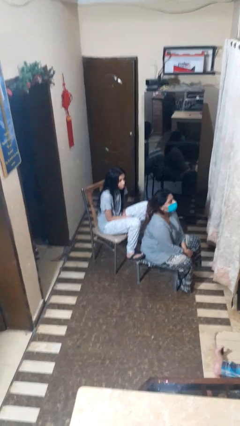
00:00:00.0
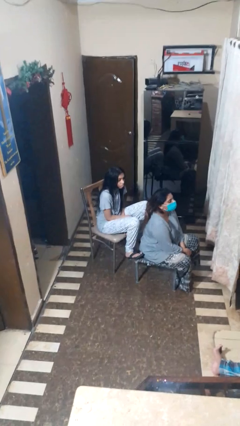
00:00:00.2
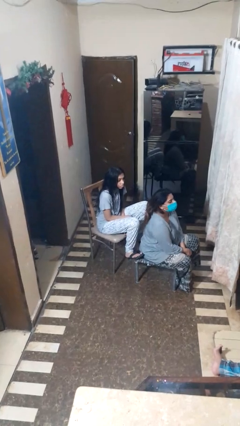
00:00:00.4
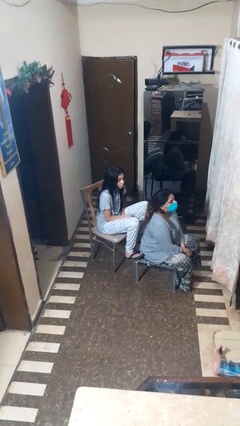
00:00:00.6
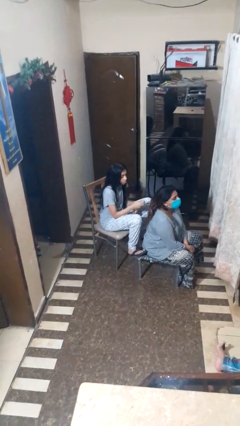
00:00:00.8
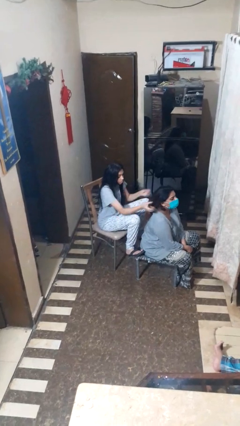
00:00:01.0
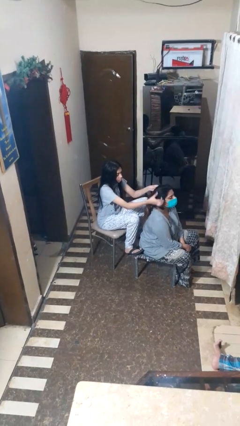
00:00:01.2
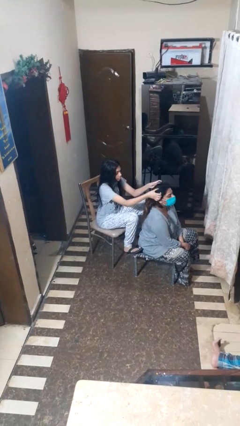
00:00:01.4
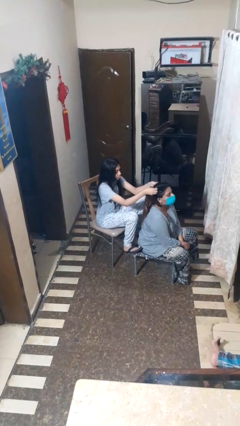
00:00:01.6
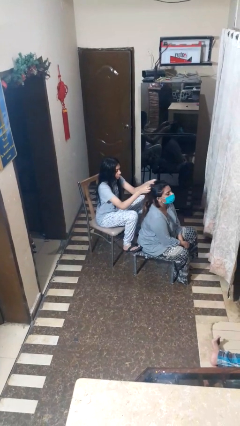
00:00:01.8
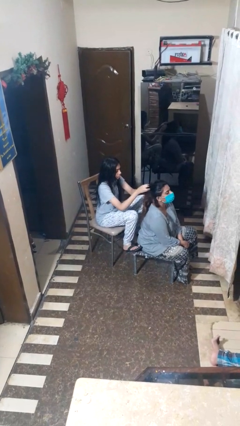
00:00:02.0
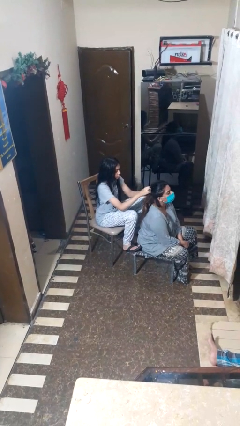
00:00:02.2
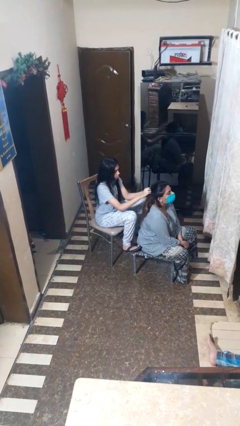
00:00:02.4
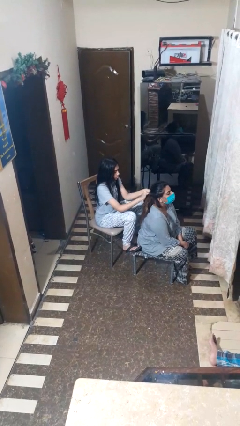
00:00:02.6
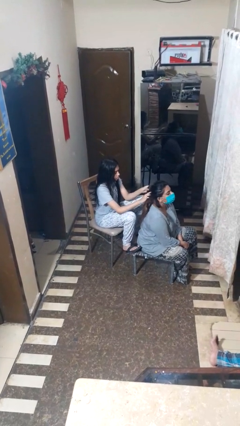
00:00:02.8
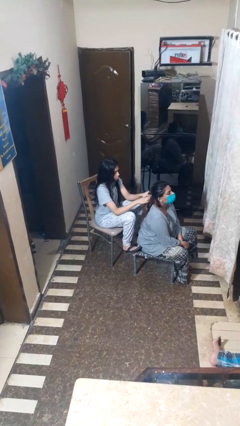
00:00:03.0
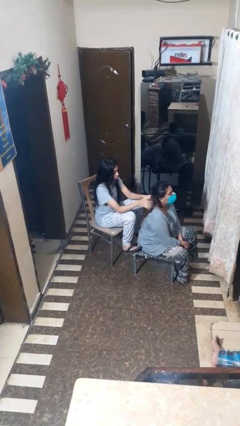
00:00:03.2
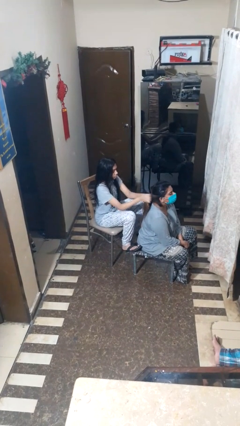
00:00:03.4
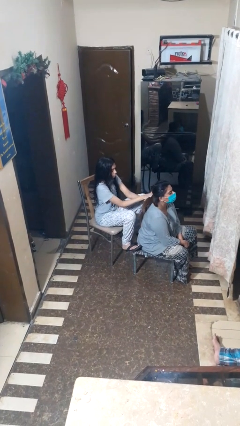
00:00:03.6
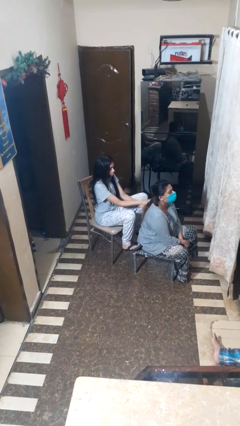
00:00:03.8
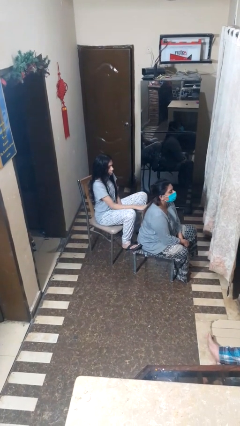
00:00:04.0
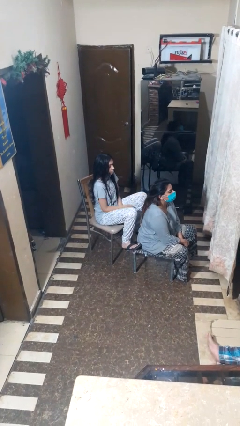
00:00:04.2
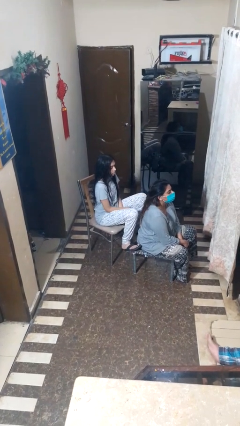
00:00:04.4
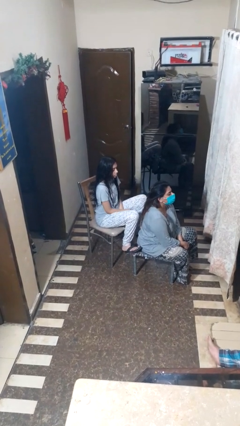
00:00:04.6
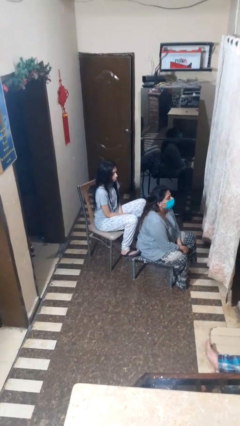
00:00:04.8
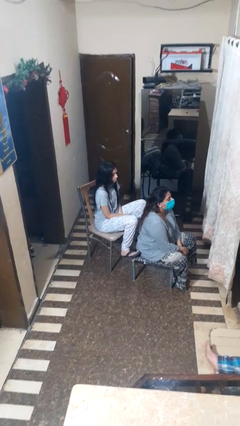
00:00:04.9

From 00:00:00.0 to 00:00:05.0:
person braids hair of person

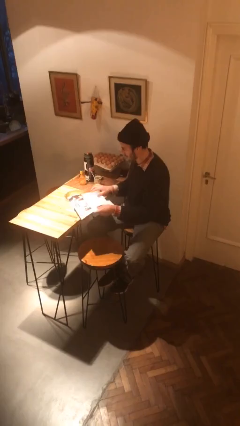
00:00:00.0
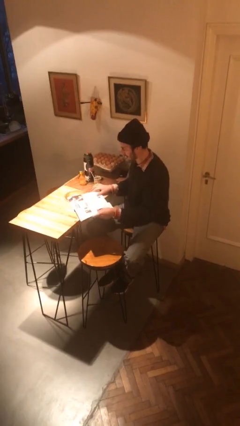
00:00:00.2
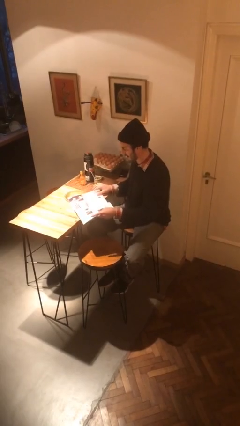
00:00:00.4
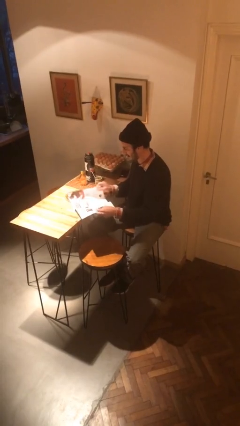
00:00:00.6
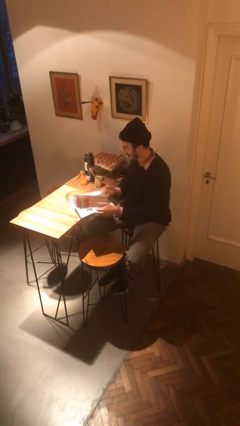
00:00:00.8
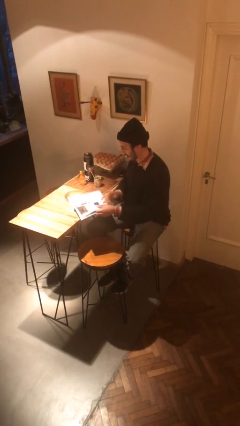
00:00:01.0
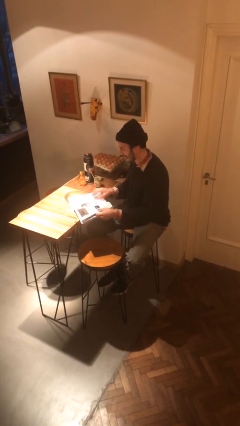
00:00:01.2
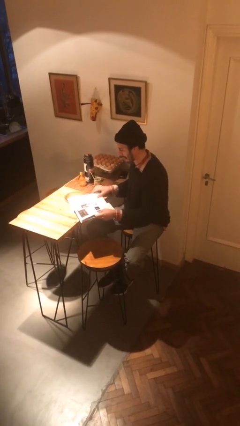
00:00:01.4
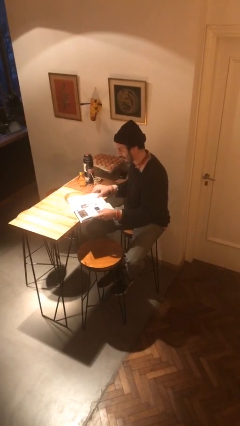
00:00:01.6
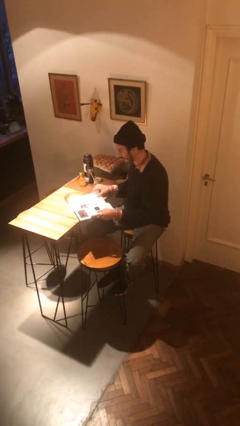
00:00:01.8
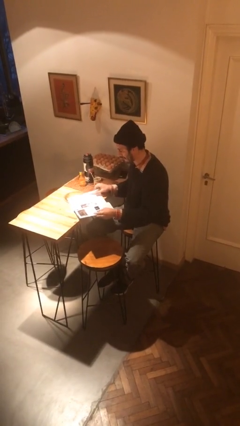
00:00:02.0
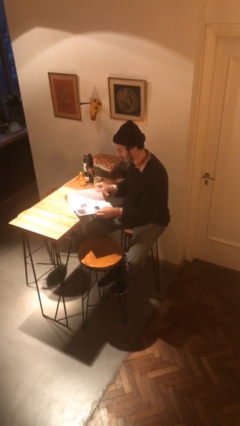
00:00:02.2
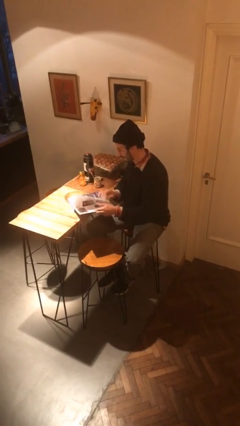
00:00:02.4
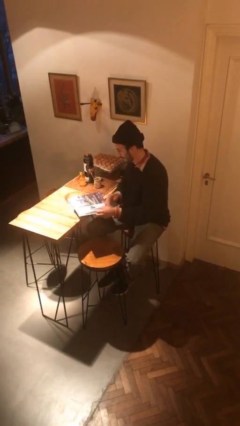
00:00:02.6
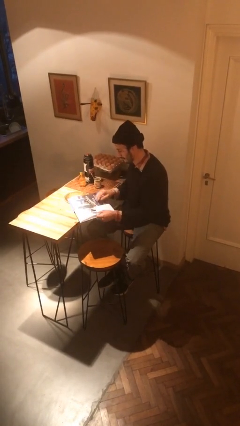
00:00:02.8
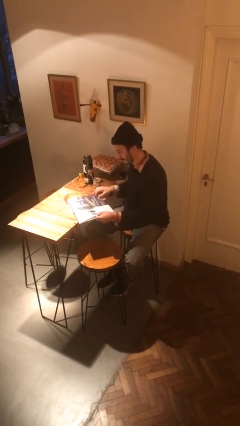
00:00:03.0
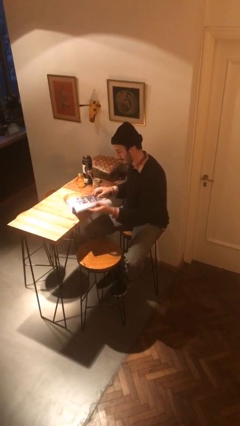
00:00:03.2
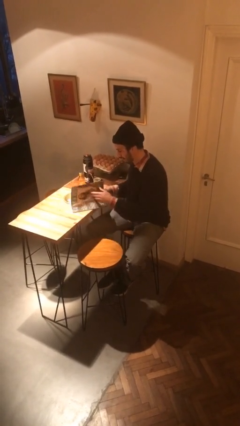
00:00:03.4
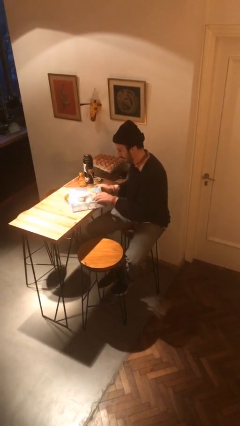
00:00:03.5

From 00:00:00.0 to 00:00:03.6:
person reads magazine

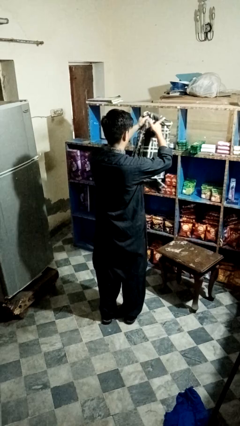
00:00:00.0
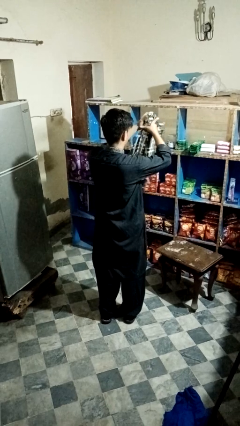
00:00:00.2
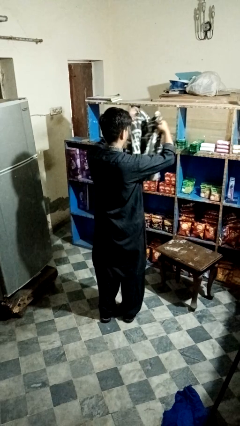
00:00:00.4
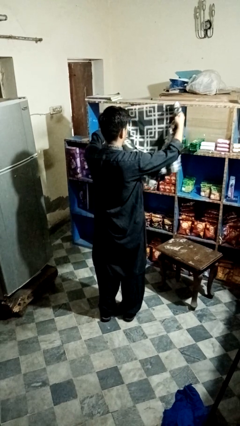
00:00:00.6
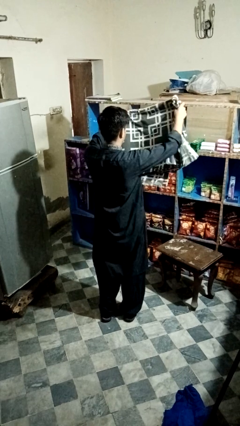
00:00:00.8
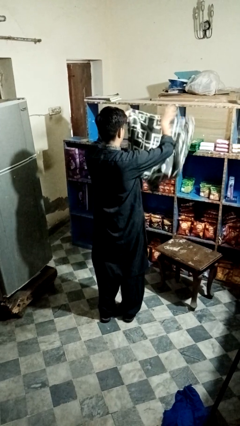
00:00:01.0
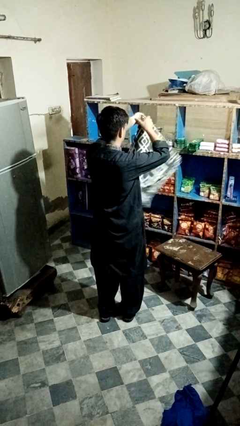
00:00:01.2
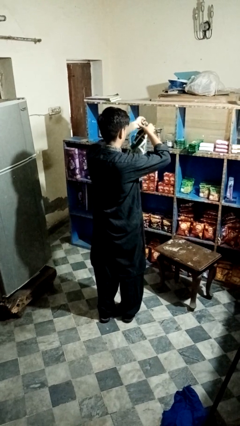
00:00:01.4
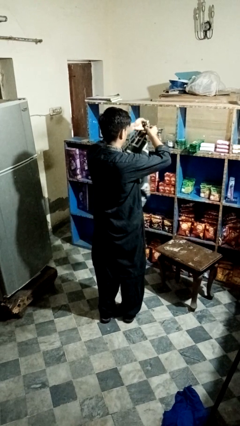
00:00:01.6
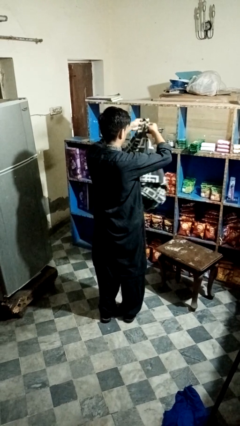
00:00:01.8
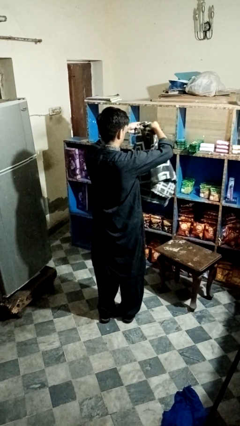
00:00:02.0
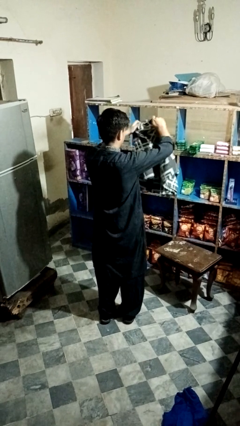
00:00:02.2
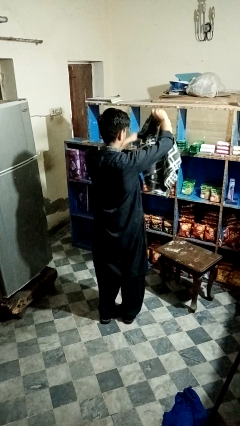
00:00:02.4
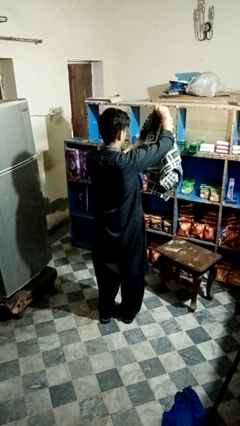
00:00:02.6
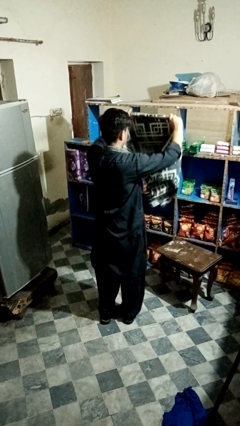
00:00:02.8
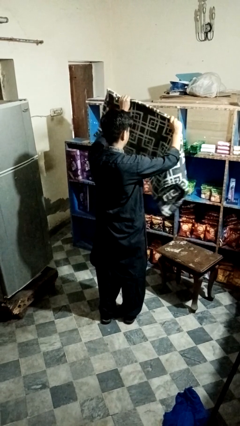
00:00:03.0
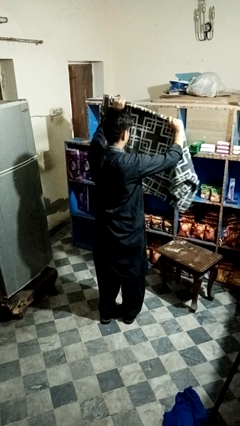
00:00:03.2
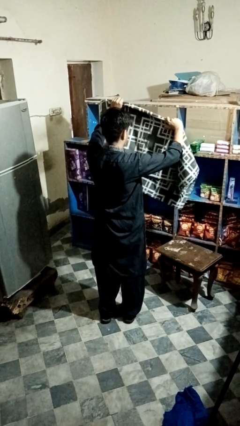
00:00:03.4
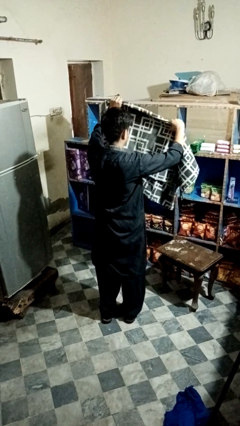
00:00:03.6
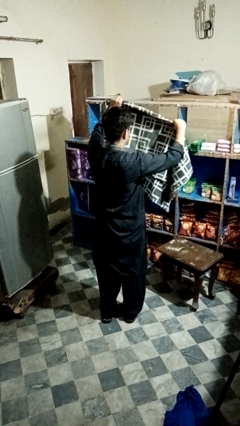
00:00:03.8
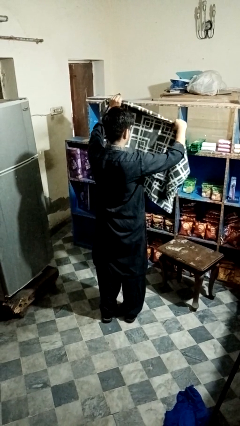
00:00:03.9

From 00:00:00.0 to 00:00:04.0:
person unfolds blanket

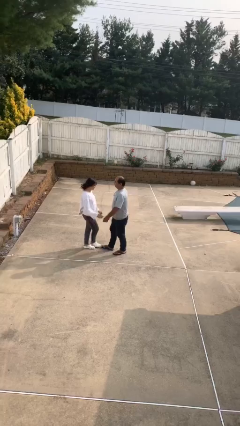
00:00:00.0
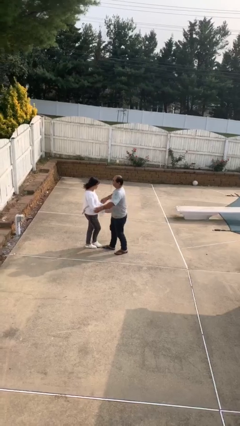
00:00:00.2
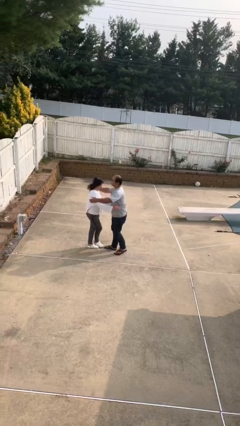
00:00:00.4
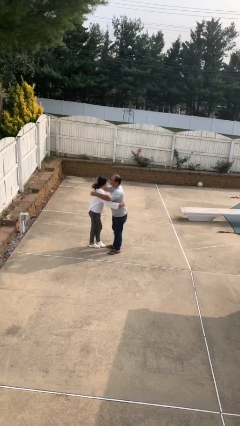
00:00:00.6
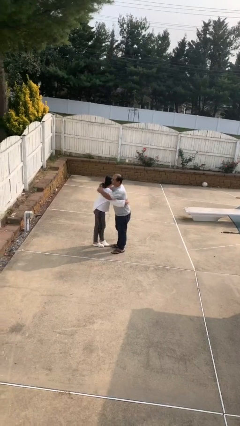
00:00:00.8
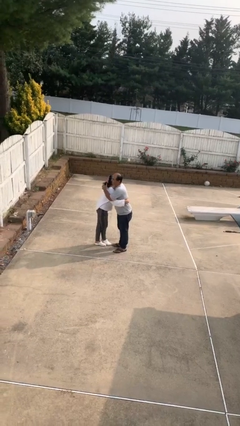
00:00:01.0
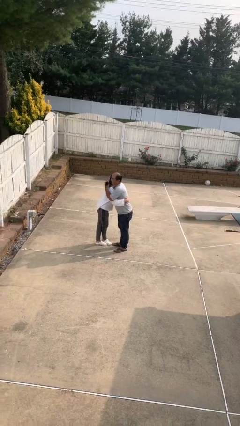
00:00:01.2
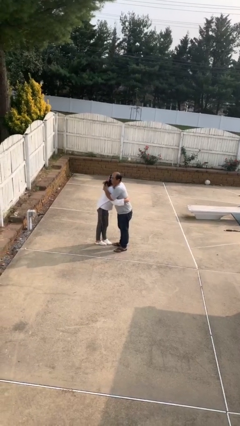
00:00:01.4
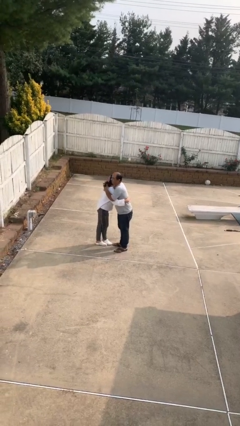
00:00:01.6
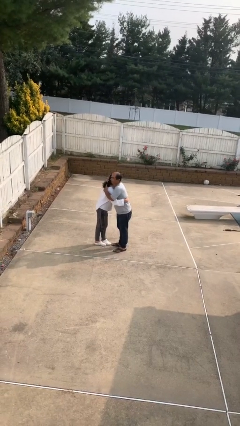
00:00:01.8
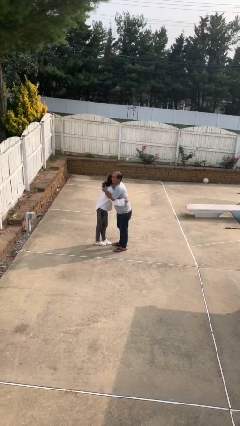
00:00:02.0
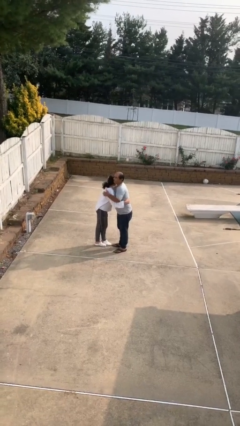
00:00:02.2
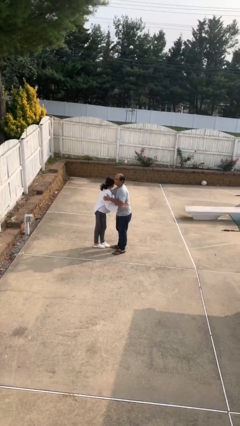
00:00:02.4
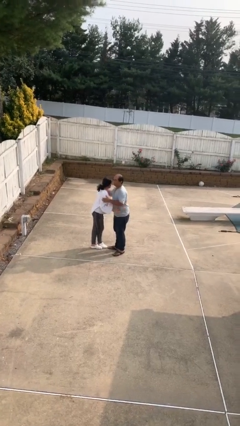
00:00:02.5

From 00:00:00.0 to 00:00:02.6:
person embraces person

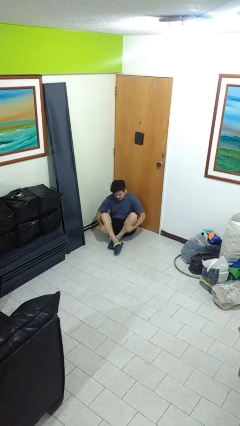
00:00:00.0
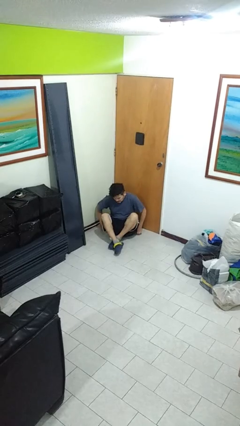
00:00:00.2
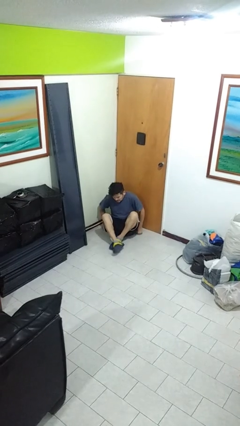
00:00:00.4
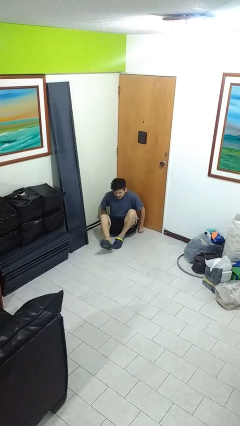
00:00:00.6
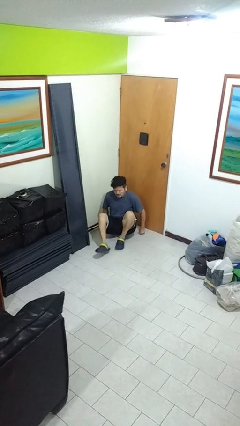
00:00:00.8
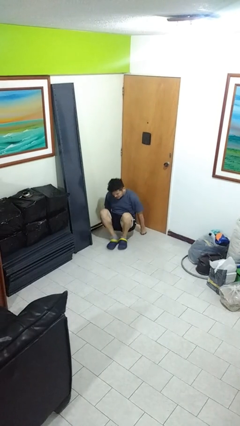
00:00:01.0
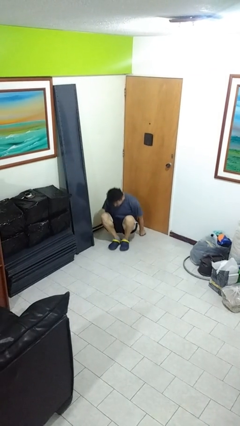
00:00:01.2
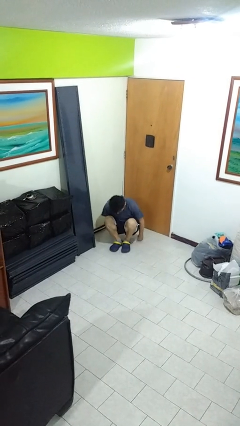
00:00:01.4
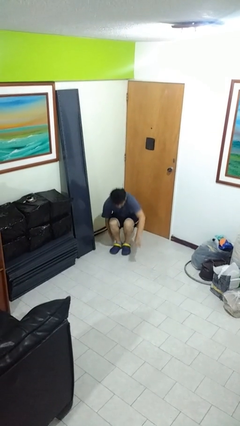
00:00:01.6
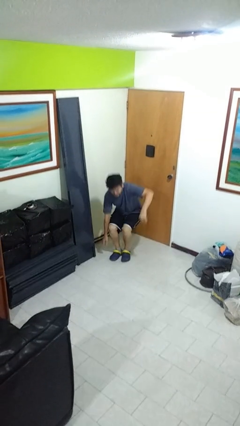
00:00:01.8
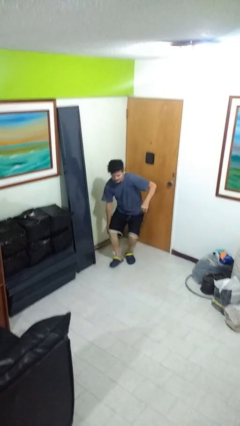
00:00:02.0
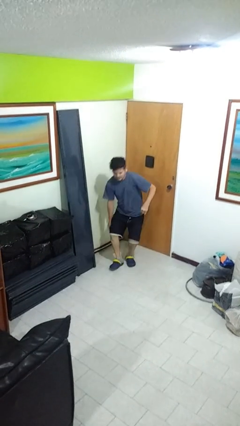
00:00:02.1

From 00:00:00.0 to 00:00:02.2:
person stands up from floor
